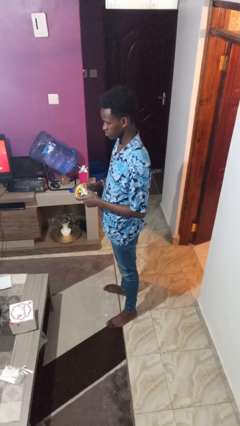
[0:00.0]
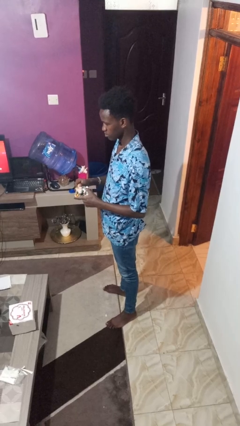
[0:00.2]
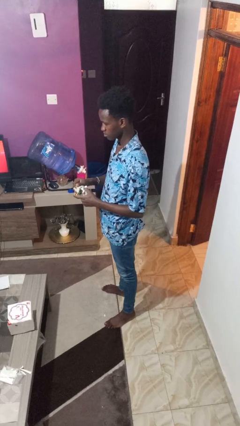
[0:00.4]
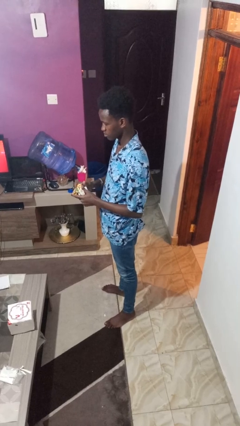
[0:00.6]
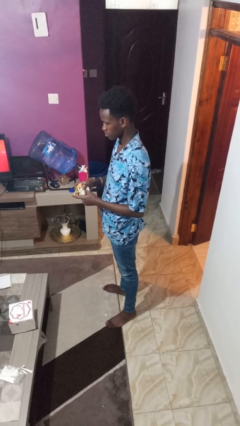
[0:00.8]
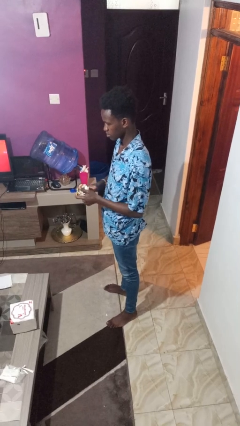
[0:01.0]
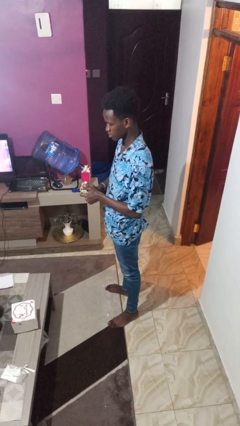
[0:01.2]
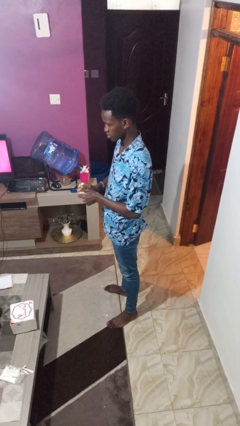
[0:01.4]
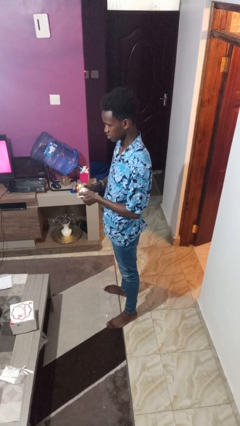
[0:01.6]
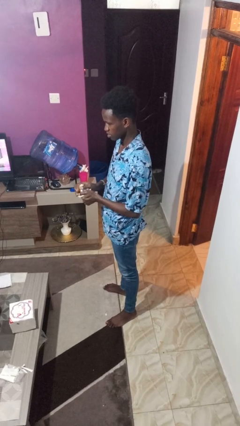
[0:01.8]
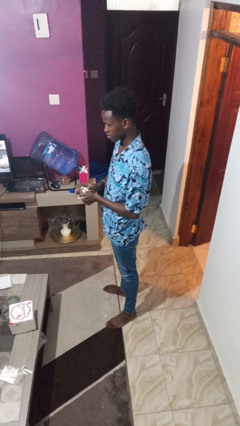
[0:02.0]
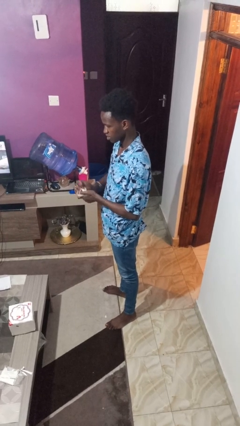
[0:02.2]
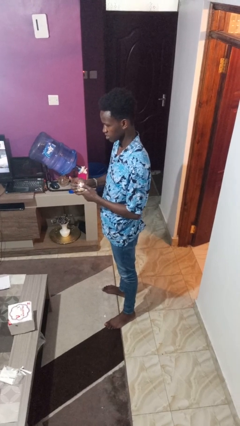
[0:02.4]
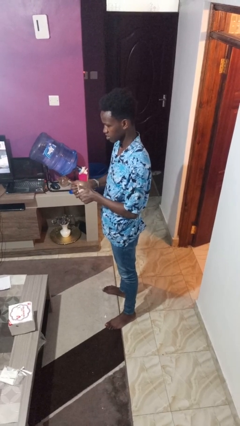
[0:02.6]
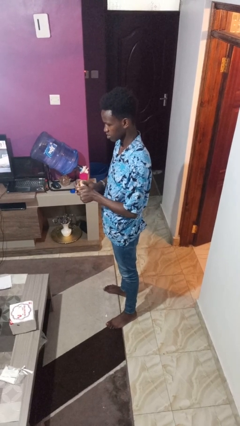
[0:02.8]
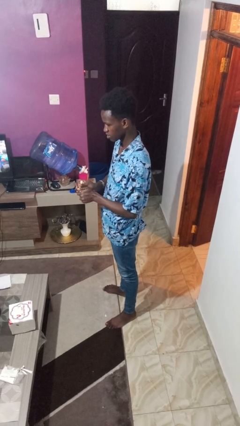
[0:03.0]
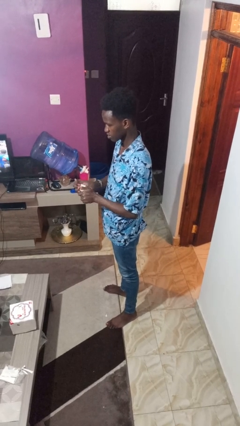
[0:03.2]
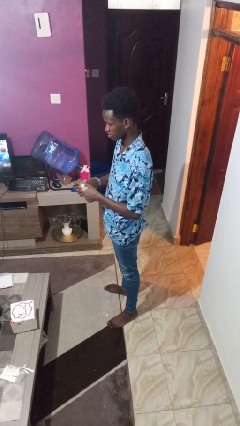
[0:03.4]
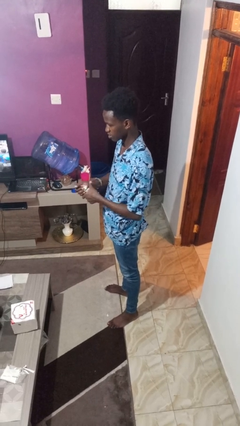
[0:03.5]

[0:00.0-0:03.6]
person crumples paper

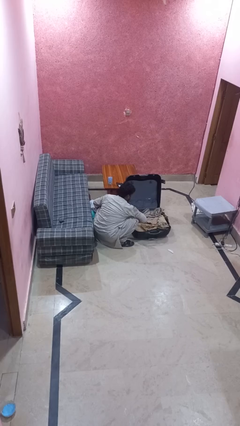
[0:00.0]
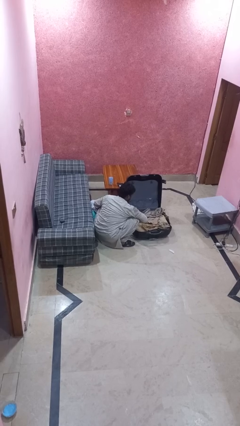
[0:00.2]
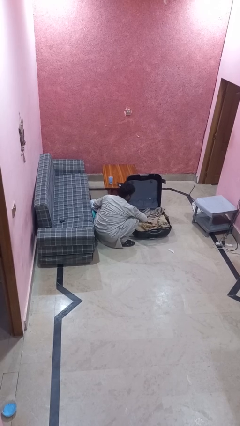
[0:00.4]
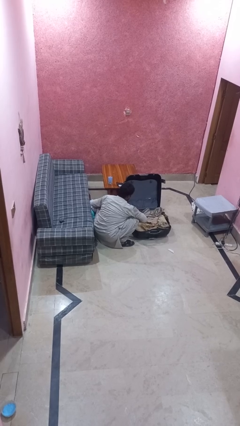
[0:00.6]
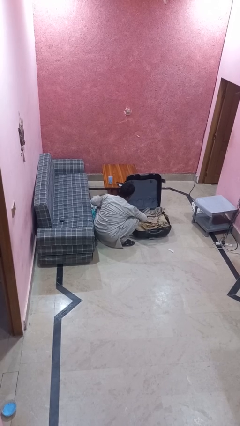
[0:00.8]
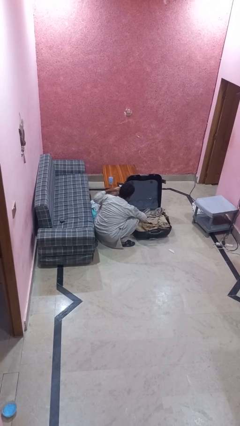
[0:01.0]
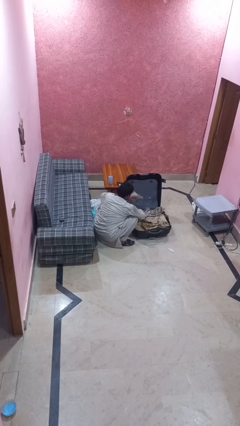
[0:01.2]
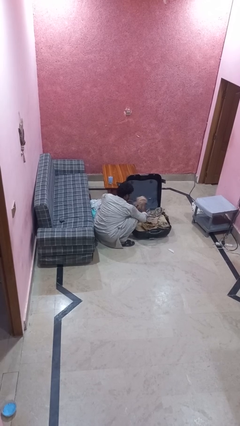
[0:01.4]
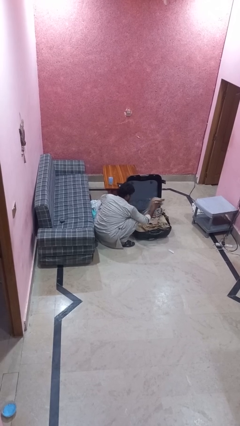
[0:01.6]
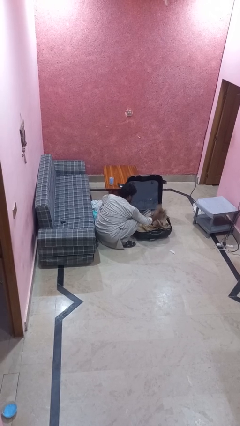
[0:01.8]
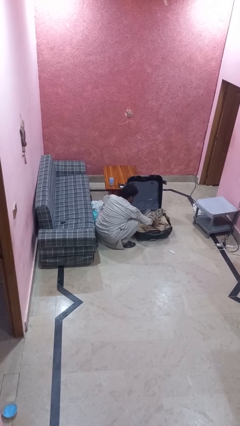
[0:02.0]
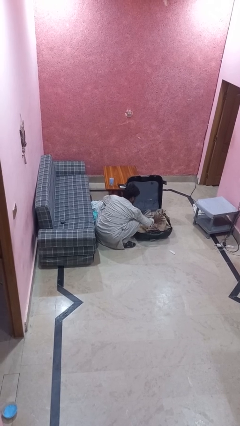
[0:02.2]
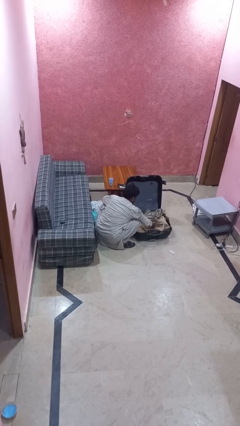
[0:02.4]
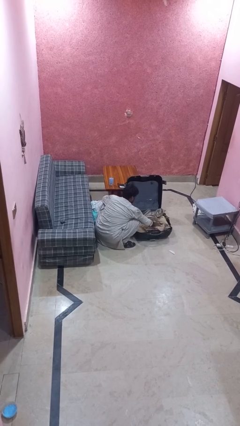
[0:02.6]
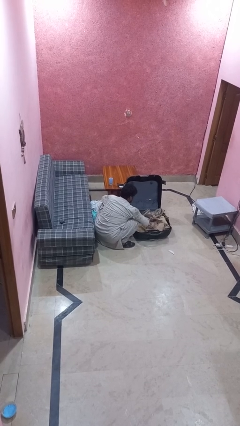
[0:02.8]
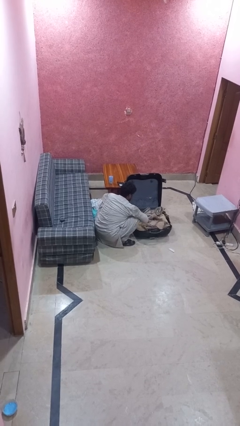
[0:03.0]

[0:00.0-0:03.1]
person loads clothes into suitcase

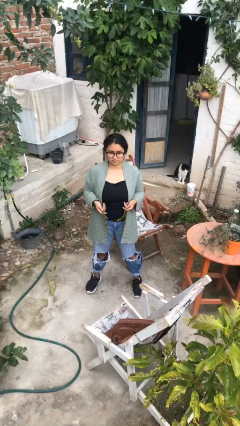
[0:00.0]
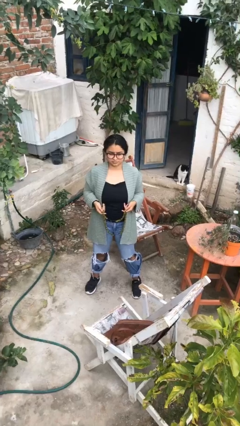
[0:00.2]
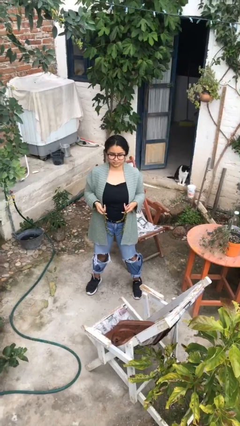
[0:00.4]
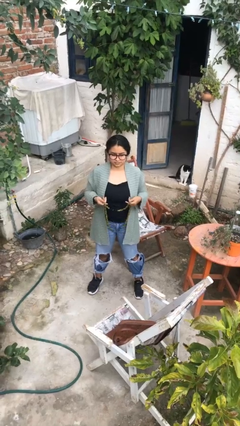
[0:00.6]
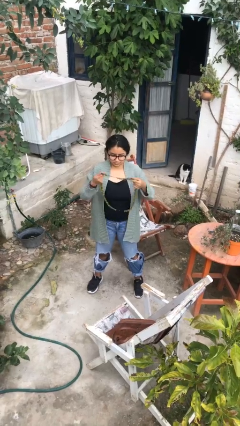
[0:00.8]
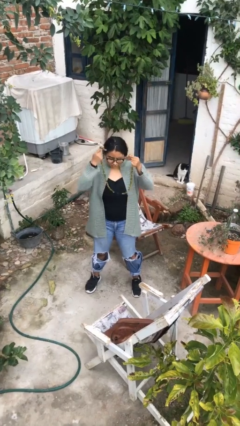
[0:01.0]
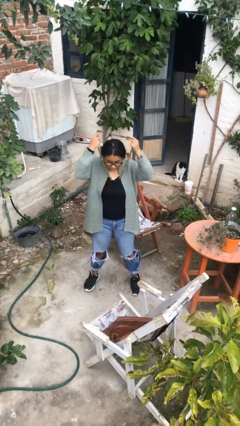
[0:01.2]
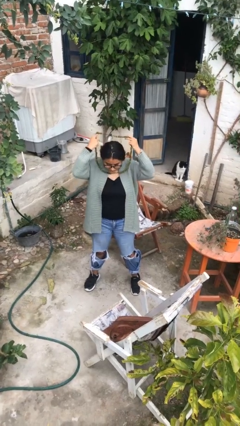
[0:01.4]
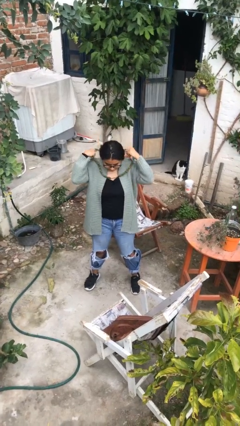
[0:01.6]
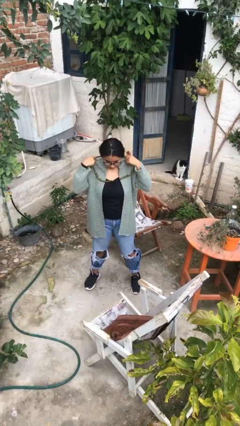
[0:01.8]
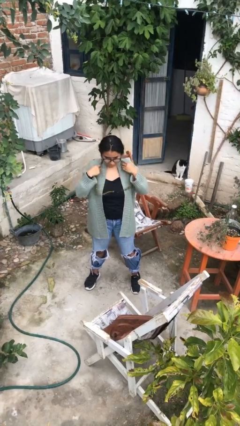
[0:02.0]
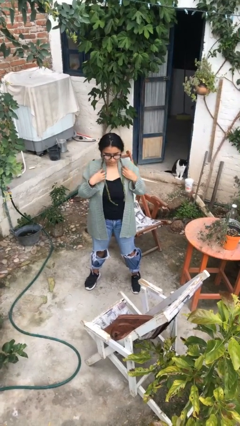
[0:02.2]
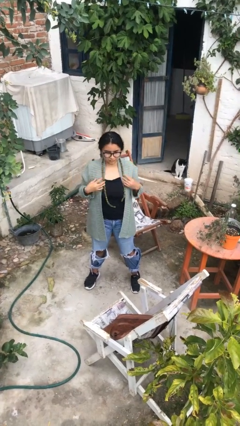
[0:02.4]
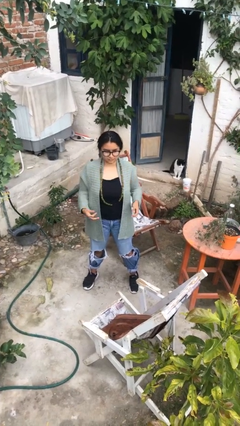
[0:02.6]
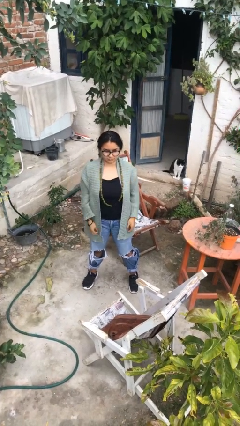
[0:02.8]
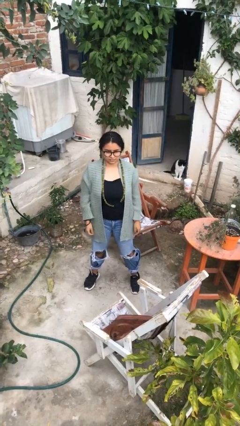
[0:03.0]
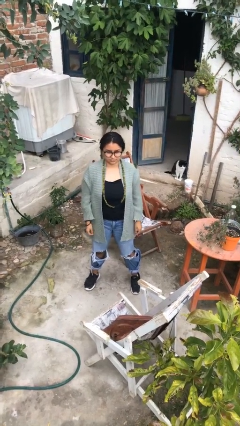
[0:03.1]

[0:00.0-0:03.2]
person puts on necklace

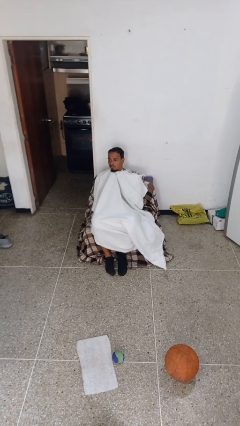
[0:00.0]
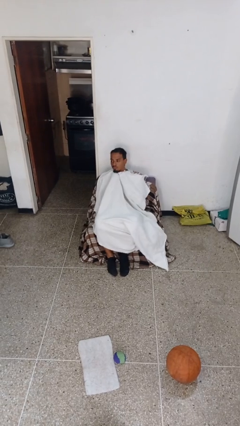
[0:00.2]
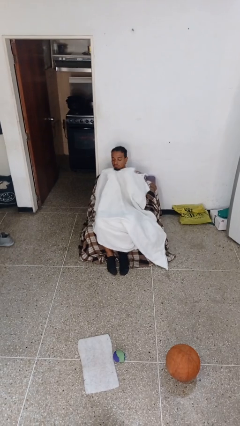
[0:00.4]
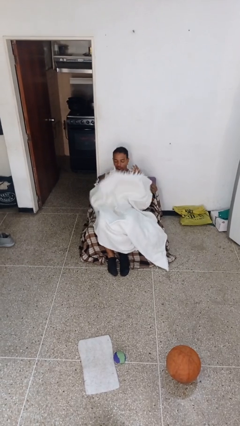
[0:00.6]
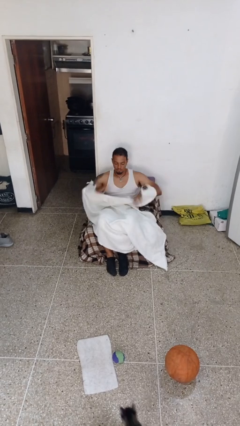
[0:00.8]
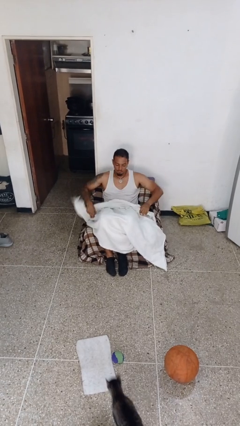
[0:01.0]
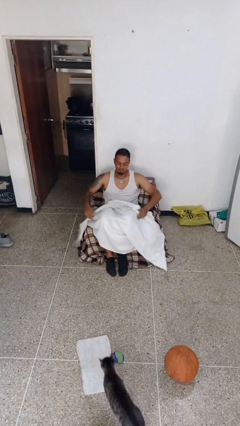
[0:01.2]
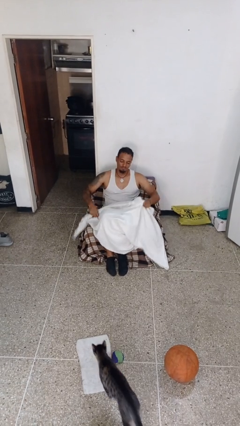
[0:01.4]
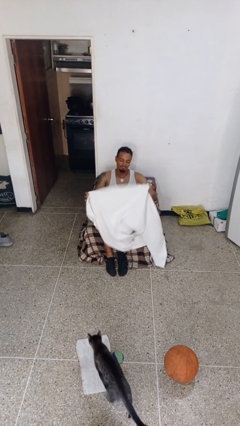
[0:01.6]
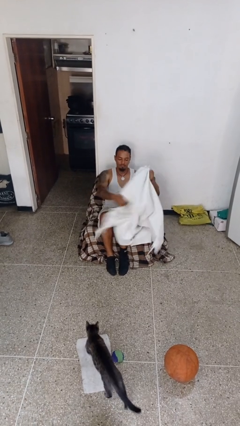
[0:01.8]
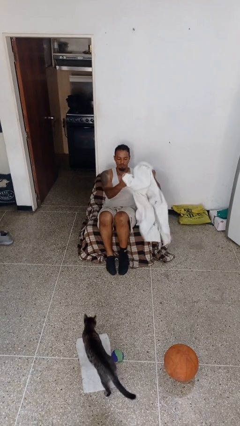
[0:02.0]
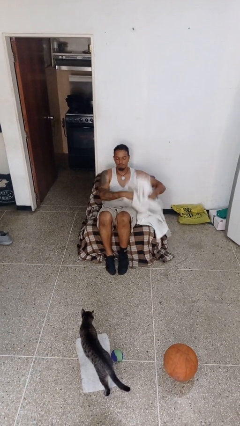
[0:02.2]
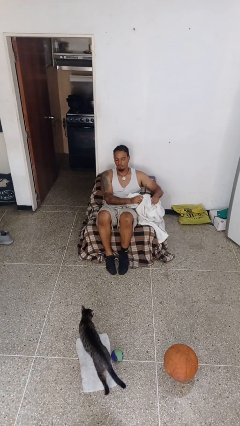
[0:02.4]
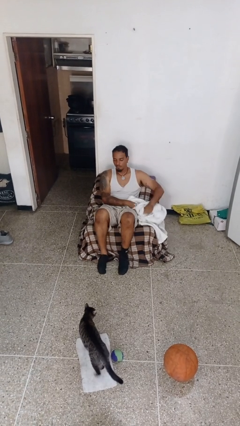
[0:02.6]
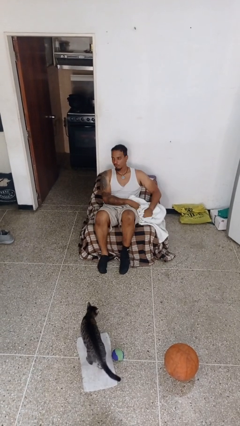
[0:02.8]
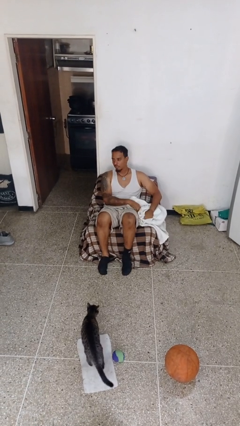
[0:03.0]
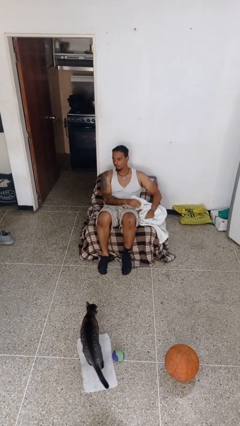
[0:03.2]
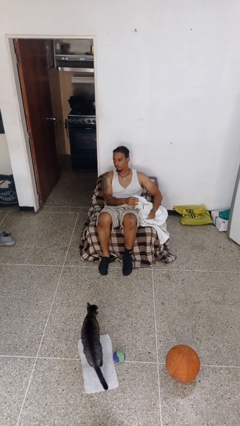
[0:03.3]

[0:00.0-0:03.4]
person uncovers with blanket

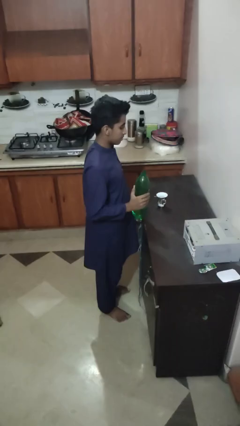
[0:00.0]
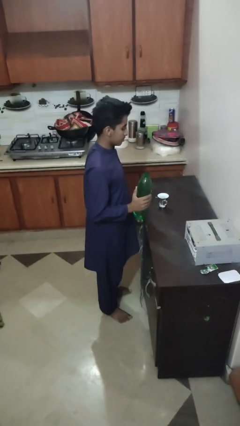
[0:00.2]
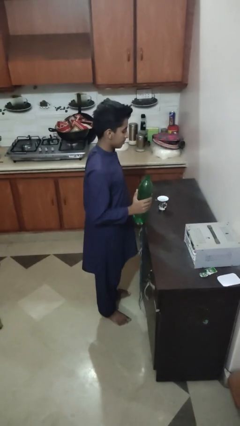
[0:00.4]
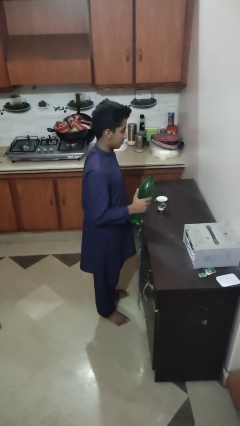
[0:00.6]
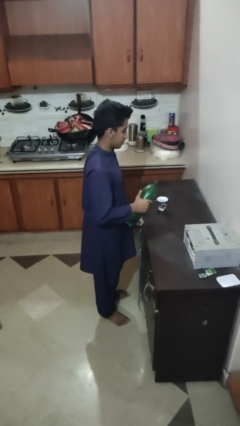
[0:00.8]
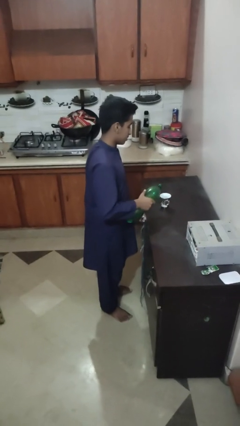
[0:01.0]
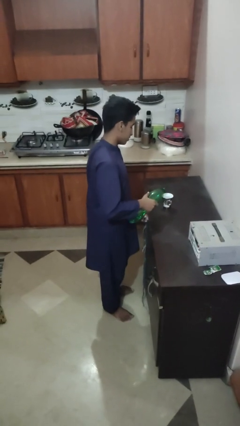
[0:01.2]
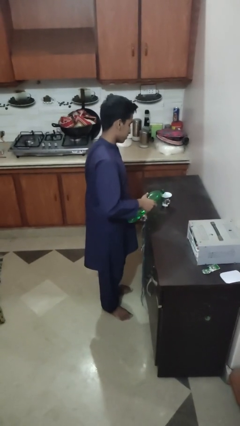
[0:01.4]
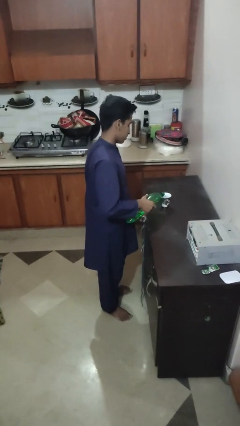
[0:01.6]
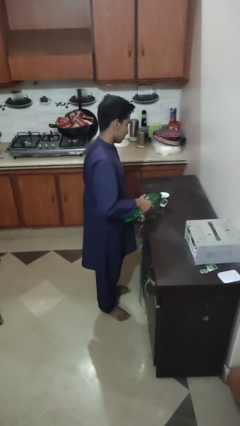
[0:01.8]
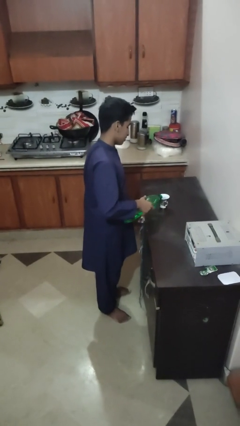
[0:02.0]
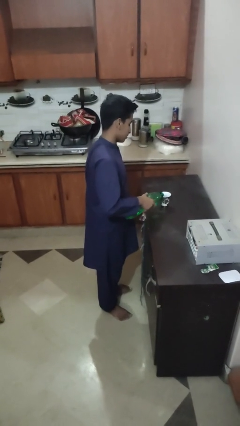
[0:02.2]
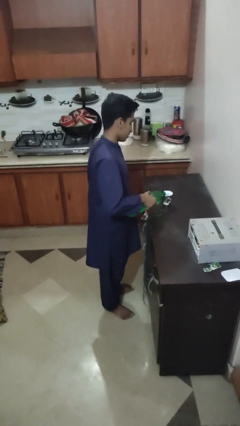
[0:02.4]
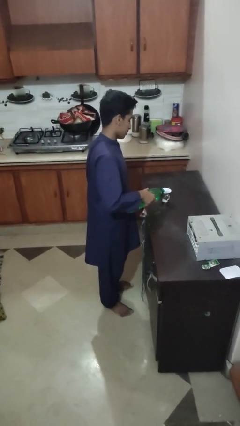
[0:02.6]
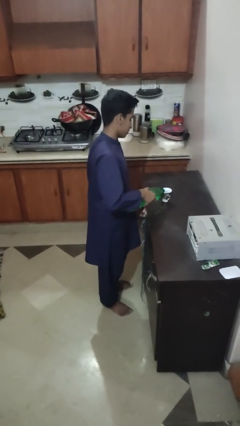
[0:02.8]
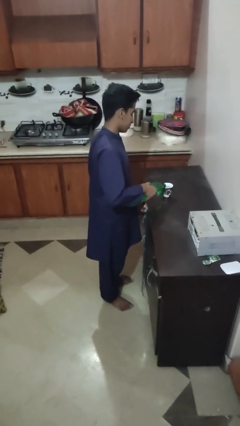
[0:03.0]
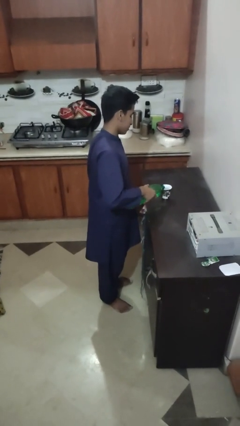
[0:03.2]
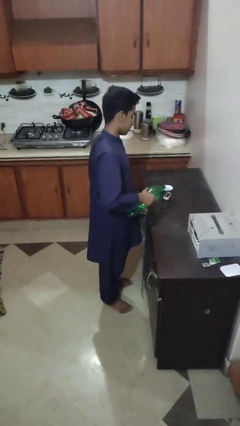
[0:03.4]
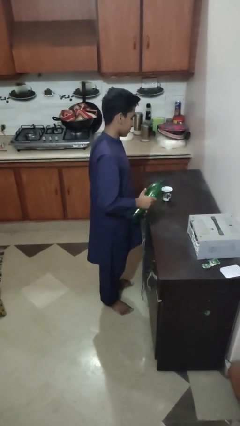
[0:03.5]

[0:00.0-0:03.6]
person pours liquid into cup

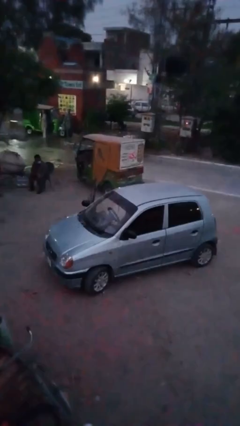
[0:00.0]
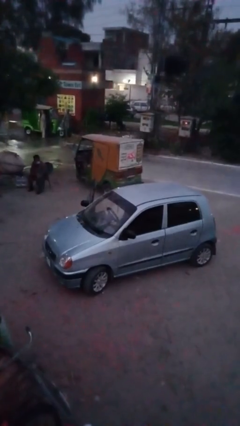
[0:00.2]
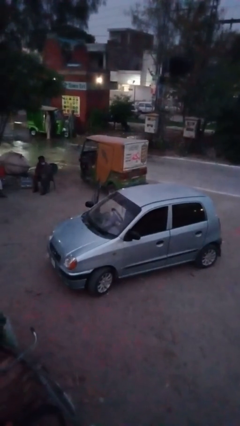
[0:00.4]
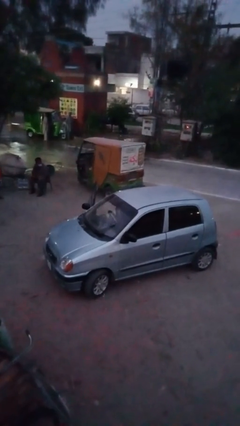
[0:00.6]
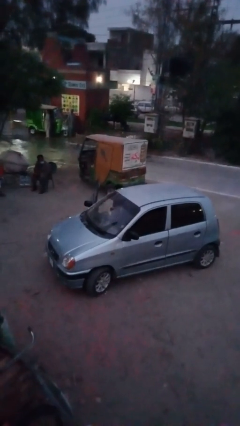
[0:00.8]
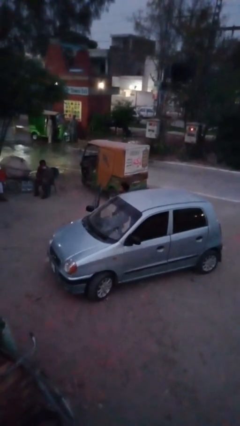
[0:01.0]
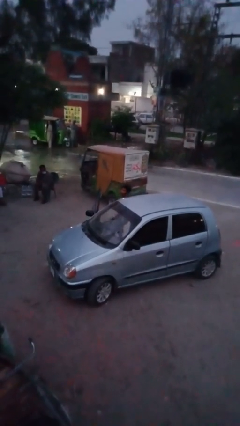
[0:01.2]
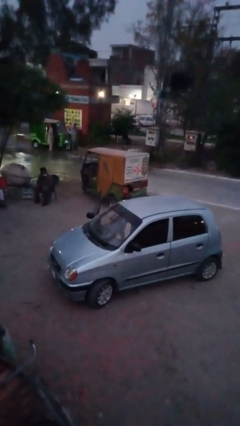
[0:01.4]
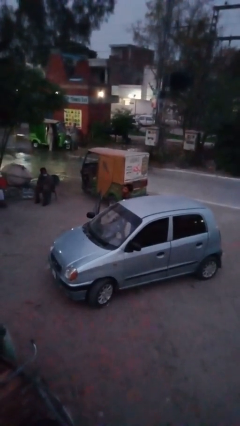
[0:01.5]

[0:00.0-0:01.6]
person exits car
